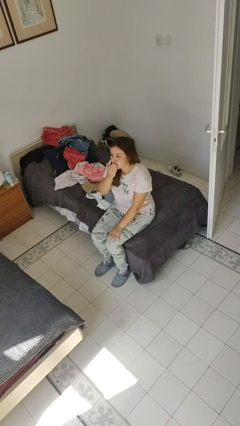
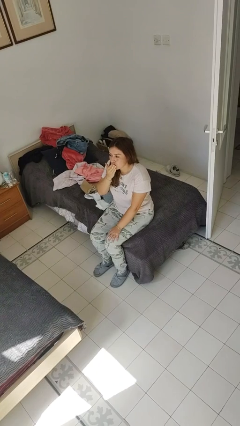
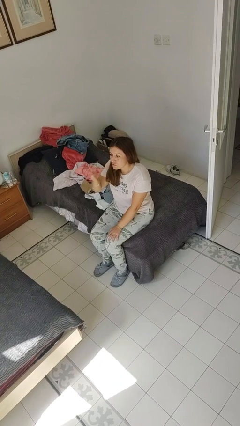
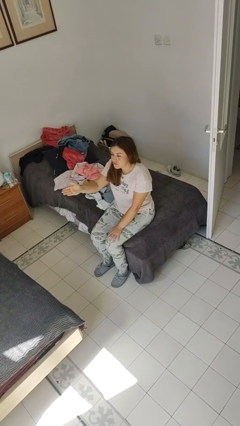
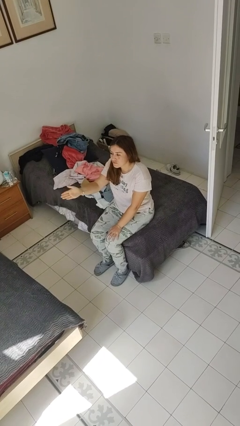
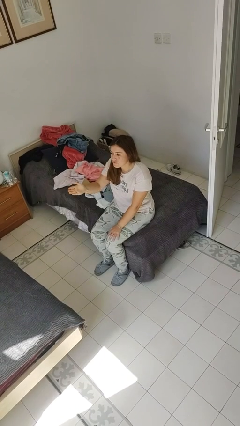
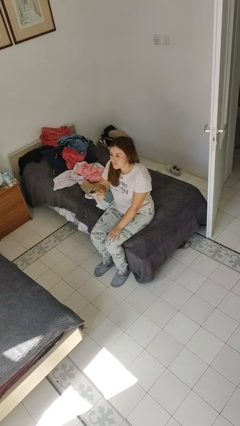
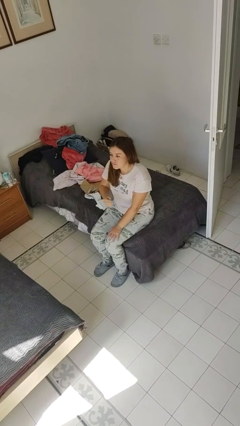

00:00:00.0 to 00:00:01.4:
person gestures blow kiss

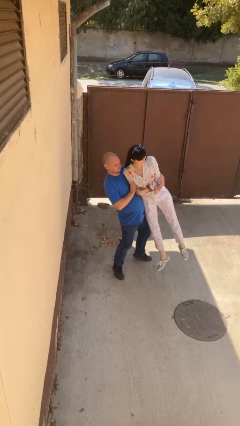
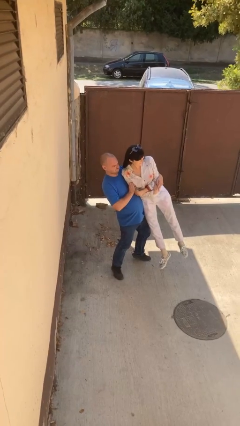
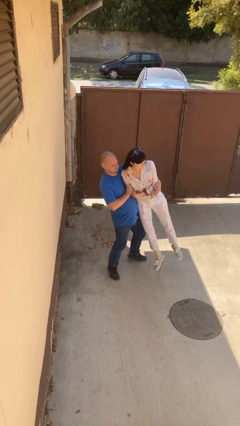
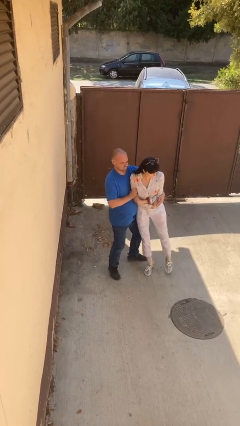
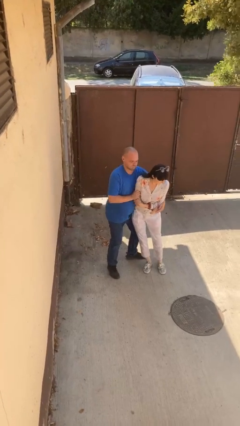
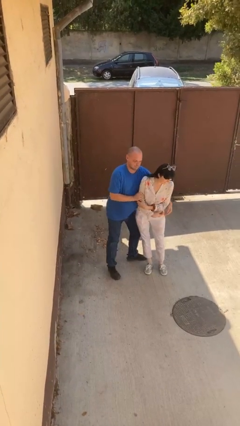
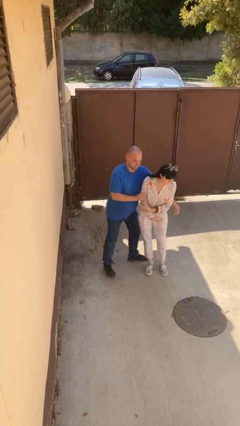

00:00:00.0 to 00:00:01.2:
person puts down person

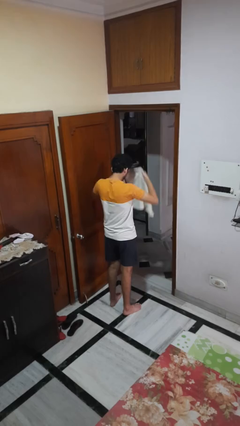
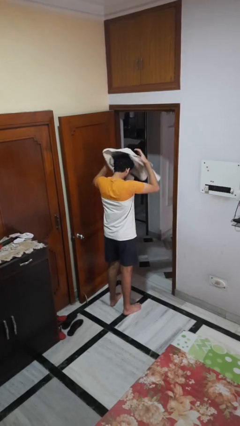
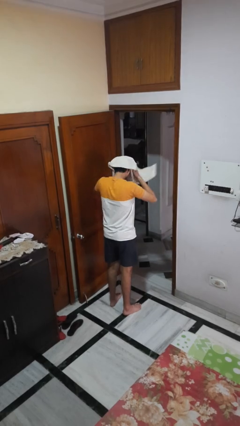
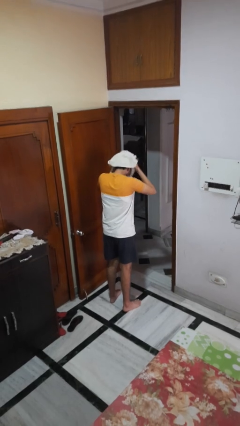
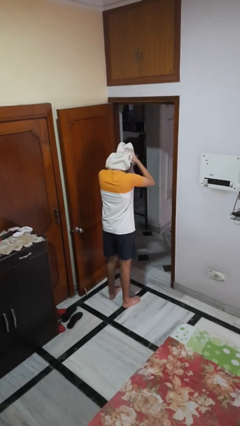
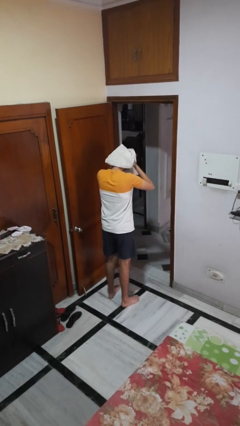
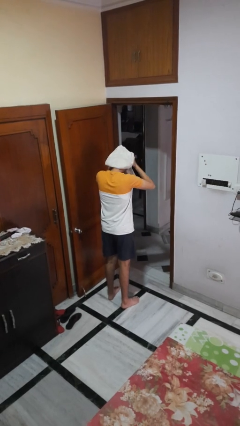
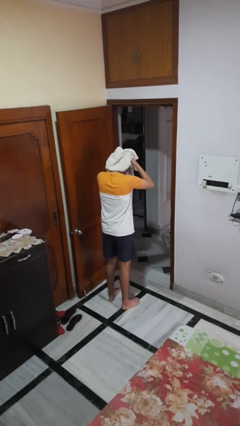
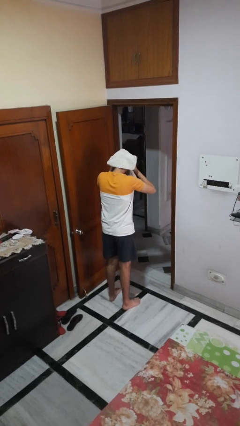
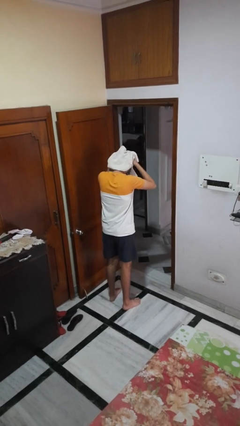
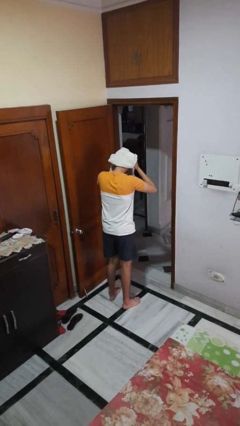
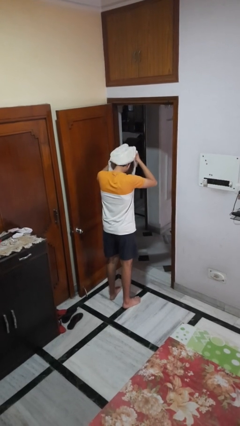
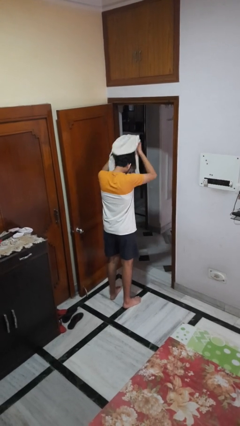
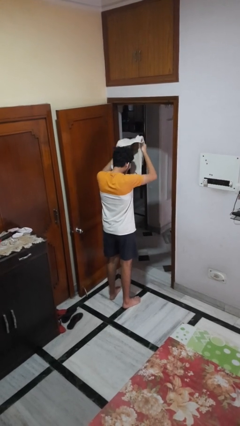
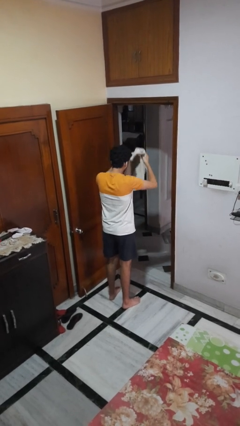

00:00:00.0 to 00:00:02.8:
person dries hair with towel

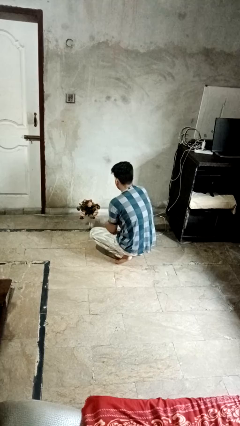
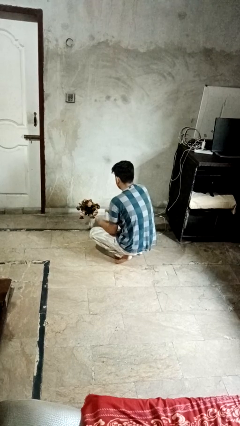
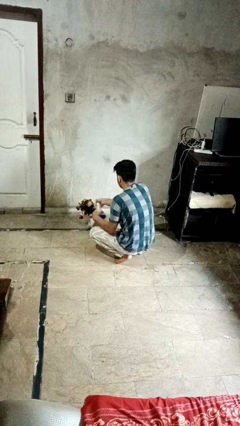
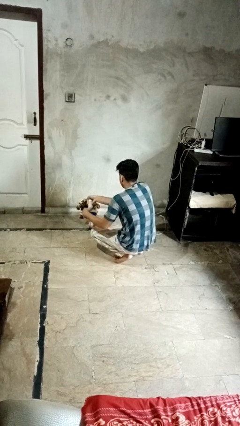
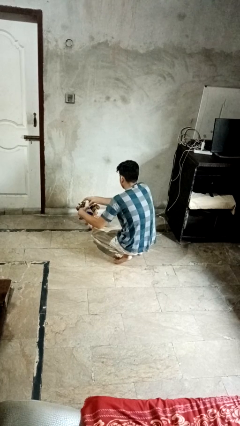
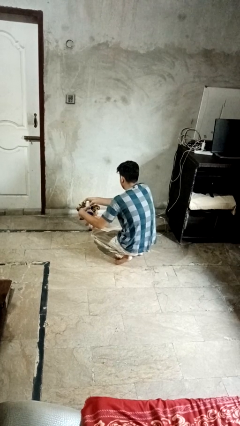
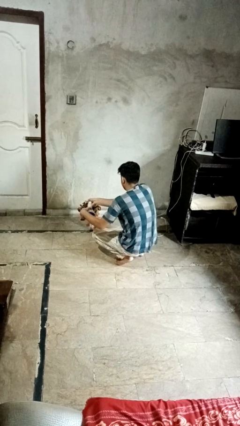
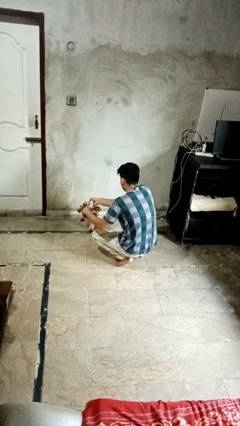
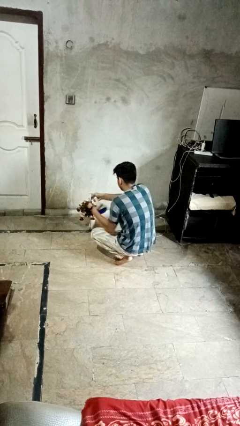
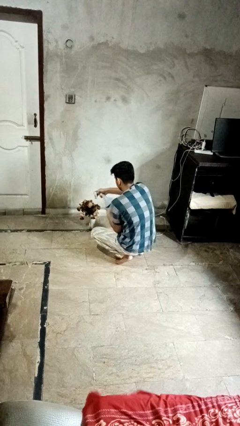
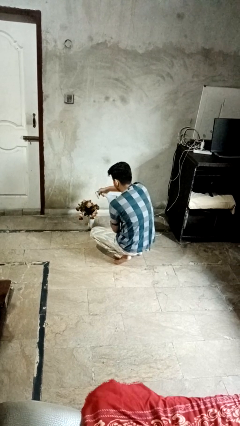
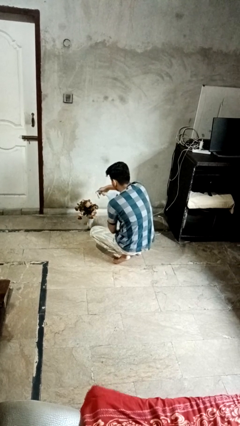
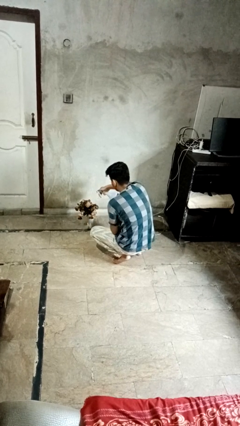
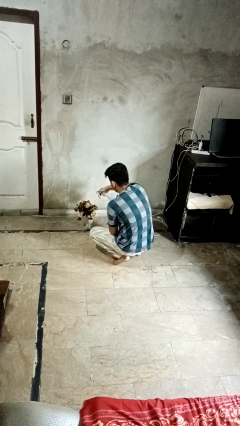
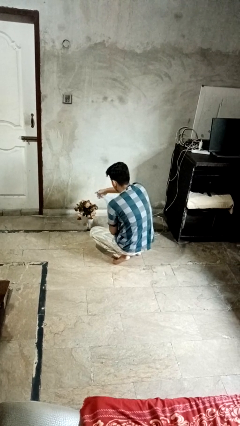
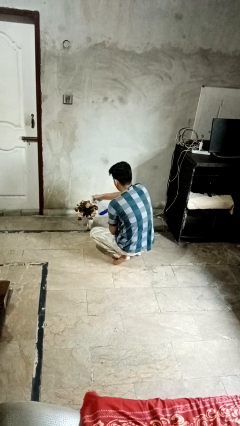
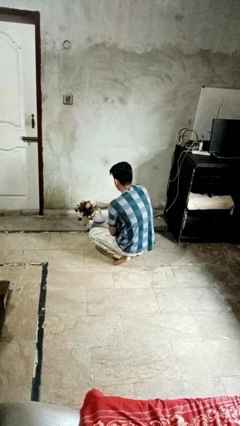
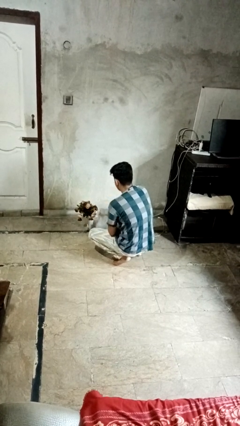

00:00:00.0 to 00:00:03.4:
person waters houseplant

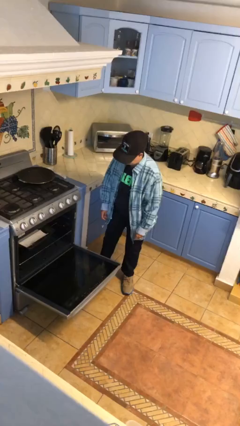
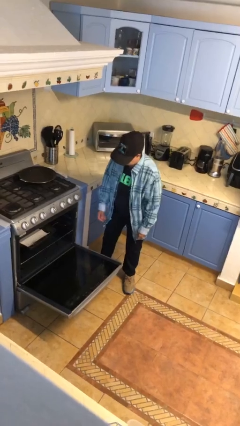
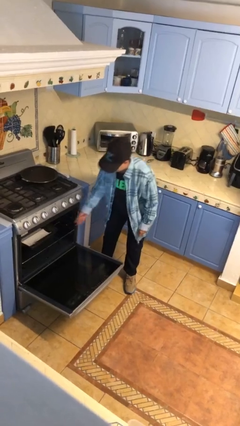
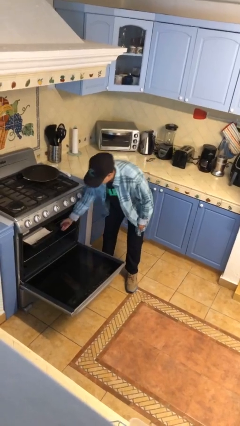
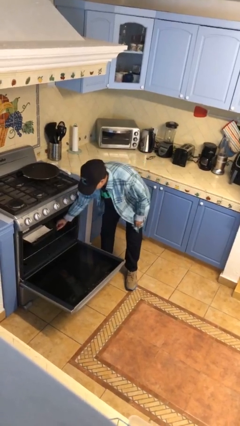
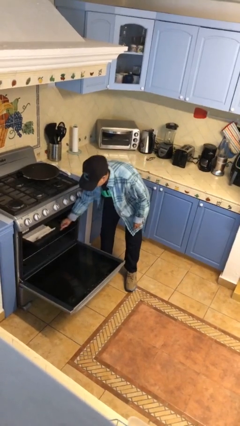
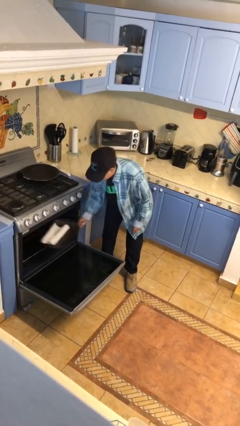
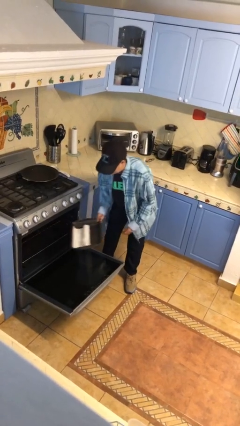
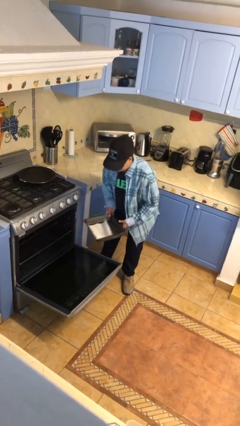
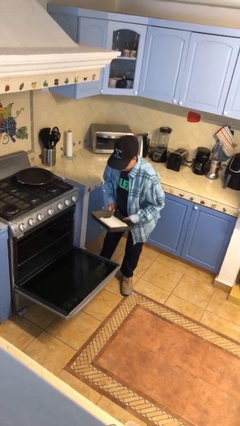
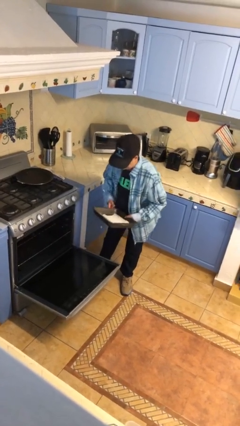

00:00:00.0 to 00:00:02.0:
person takes object from oven

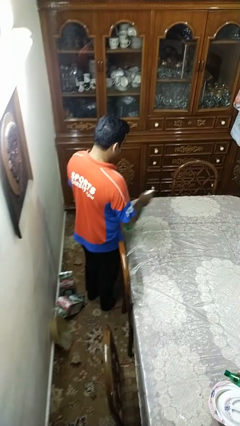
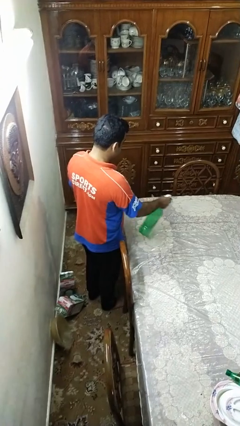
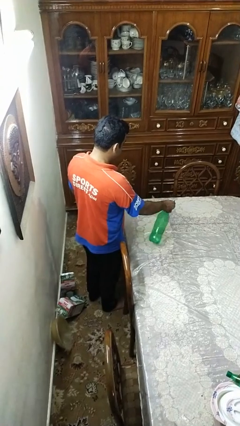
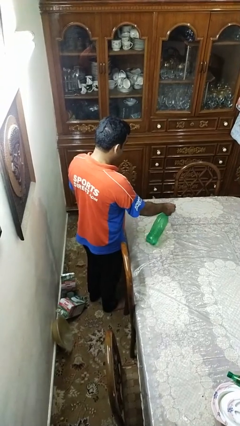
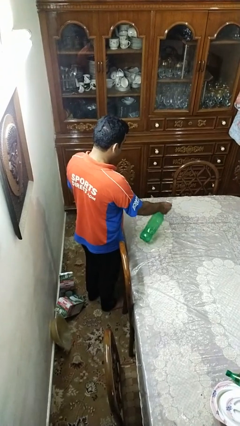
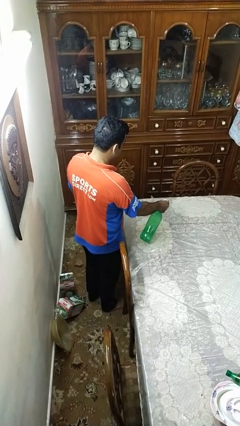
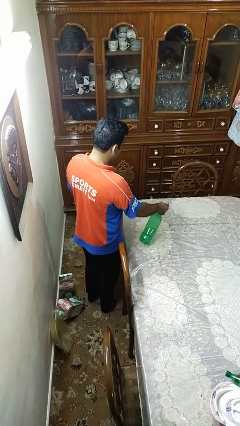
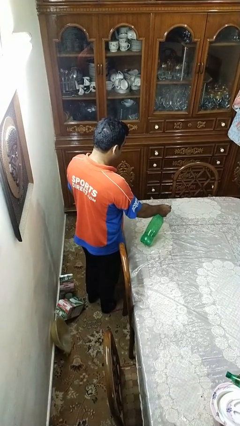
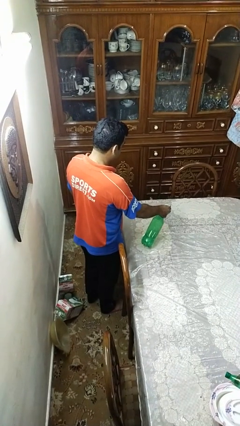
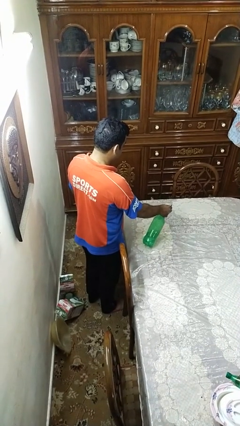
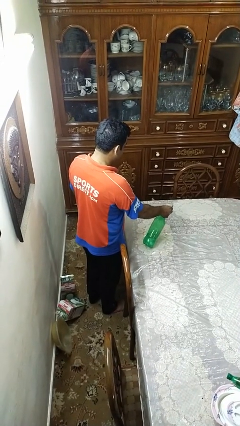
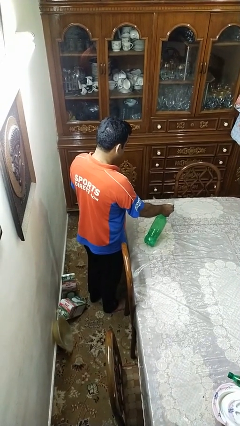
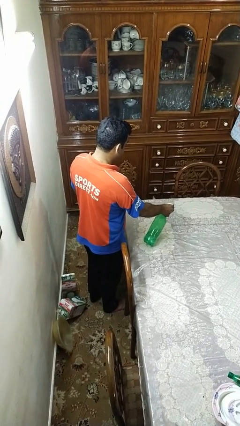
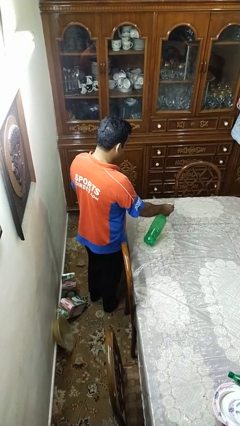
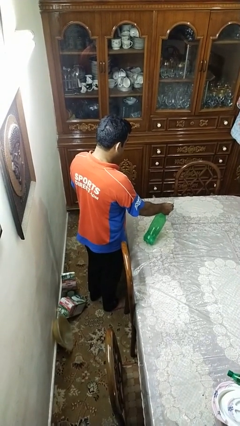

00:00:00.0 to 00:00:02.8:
person sprays from bottle

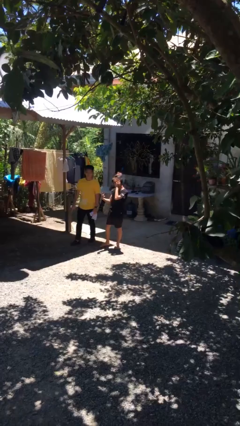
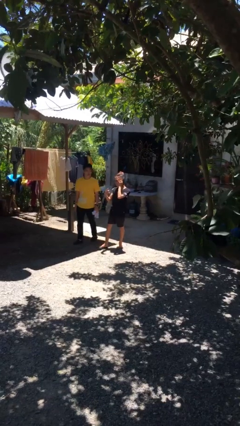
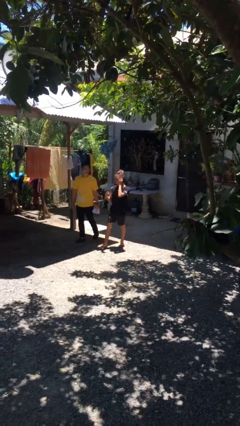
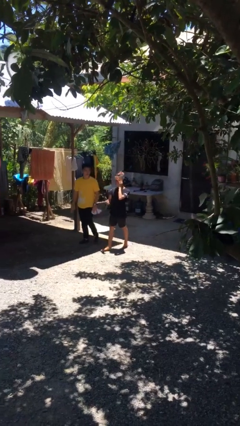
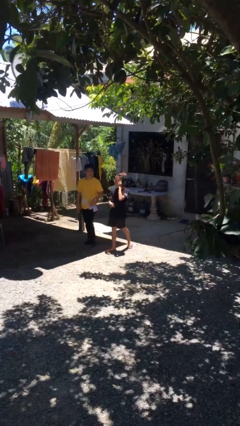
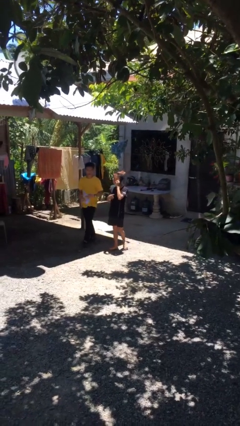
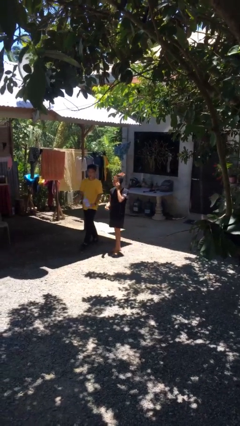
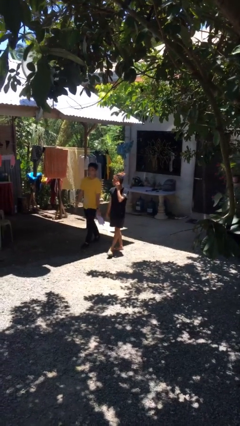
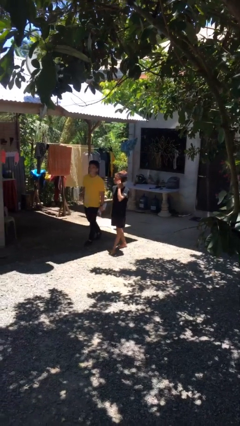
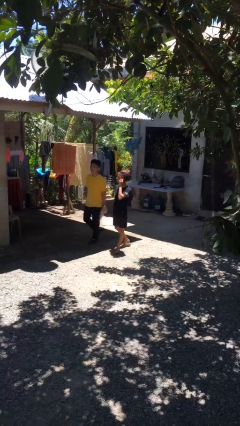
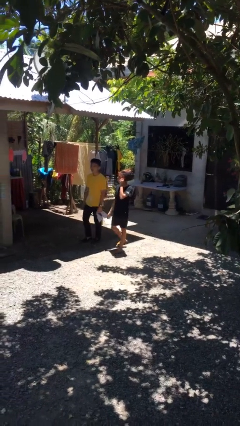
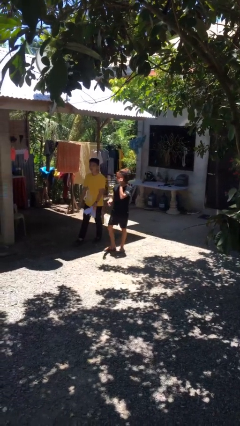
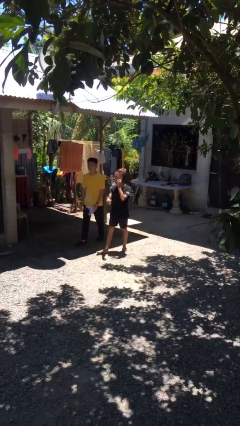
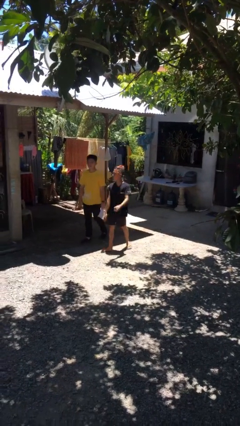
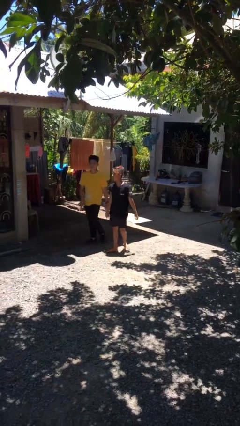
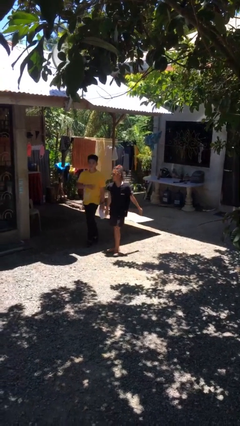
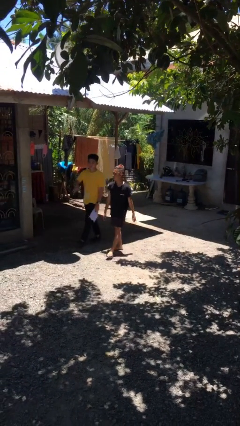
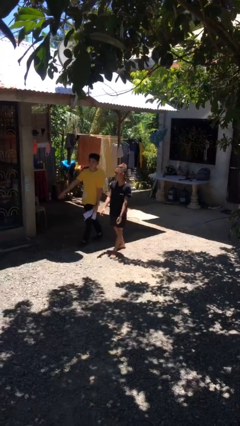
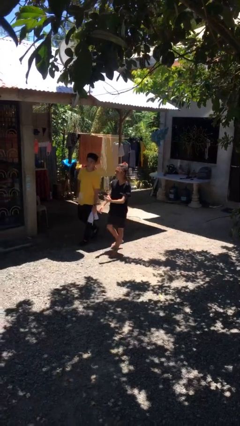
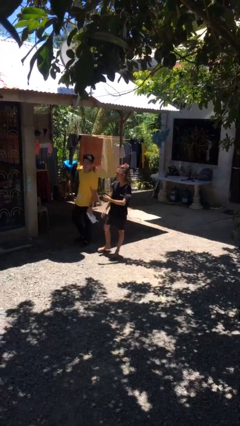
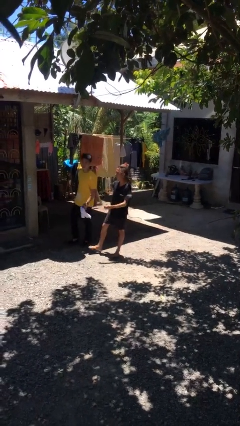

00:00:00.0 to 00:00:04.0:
person talks to person
